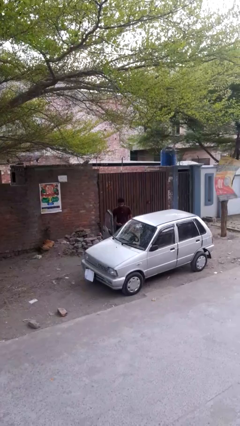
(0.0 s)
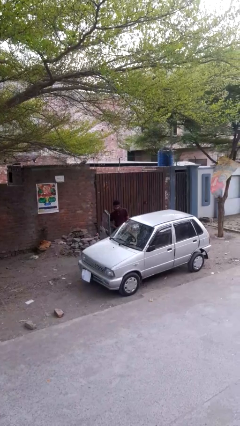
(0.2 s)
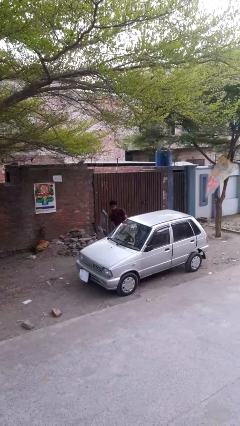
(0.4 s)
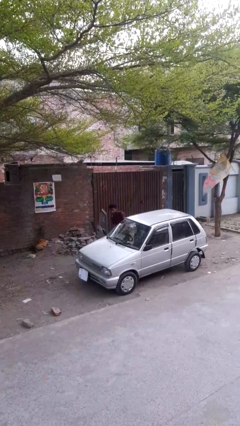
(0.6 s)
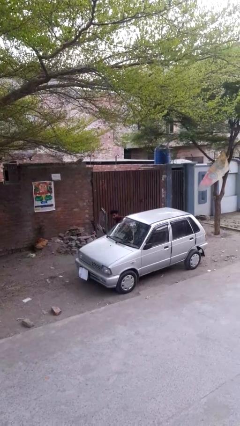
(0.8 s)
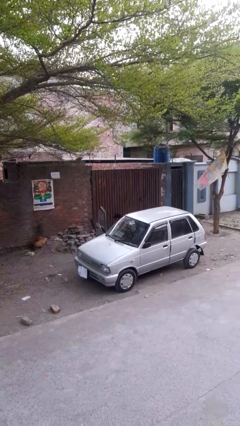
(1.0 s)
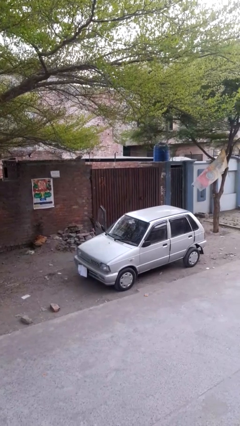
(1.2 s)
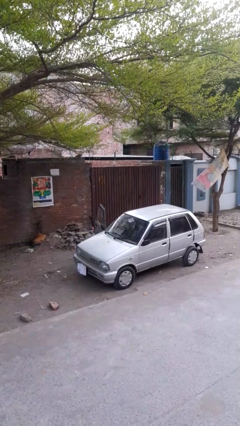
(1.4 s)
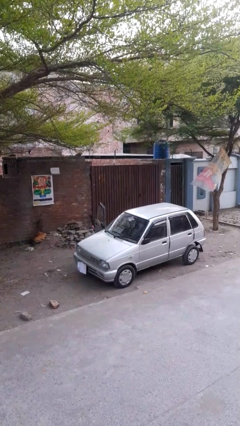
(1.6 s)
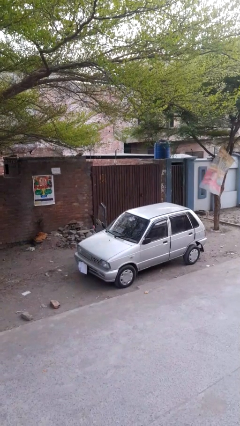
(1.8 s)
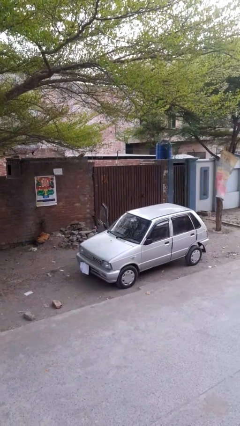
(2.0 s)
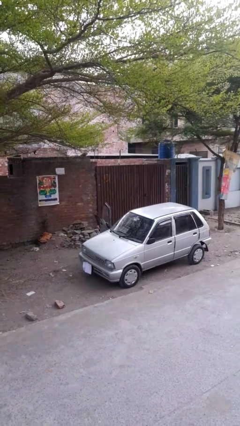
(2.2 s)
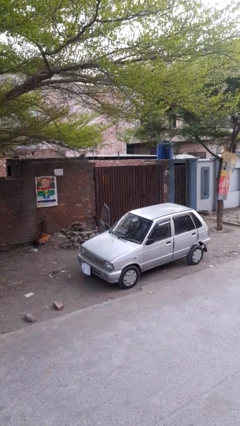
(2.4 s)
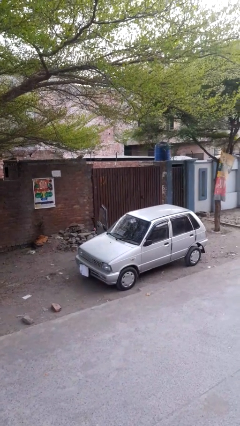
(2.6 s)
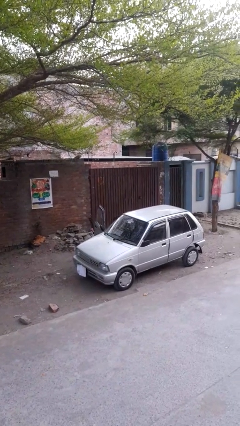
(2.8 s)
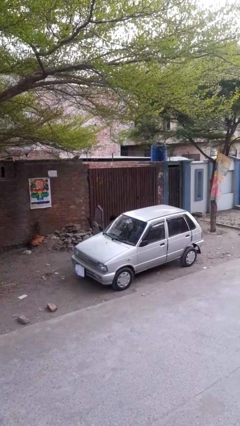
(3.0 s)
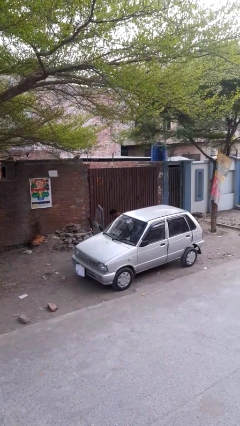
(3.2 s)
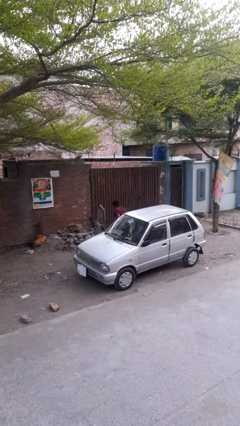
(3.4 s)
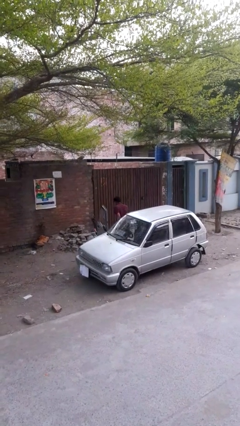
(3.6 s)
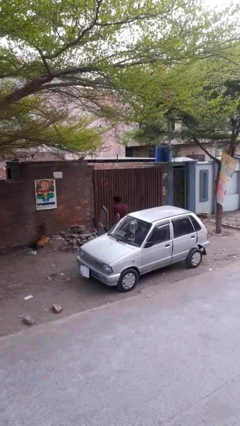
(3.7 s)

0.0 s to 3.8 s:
person enters car

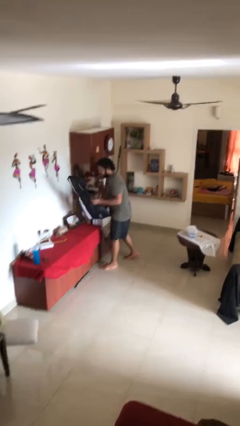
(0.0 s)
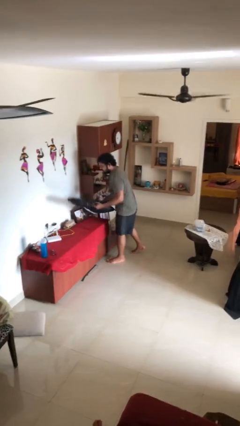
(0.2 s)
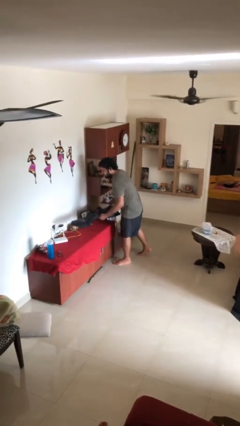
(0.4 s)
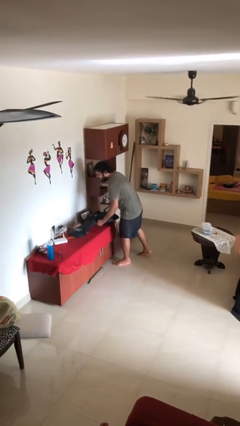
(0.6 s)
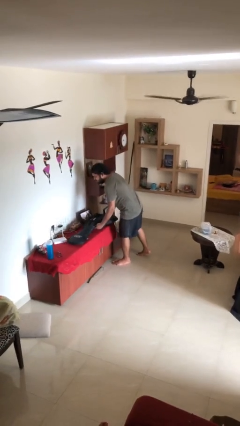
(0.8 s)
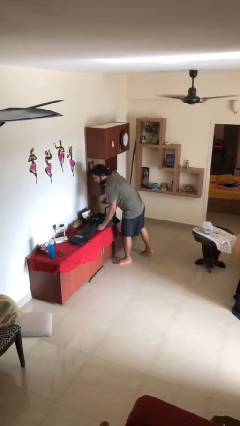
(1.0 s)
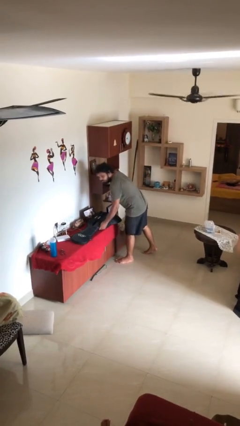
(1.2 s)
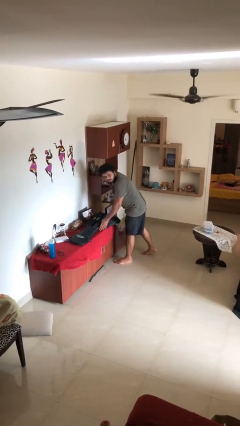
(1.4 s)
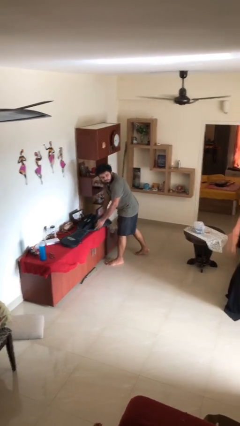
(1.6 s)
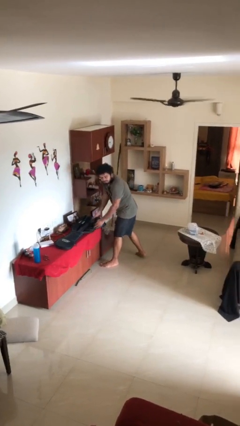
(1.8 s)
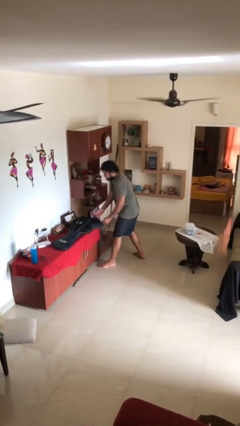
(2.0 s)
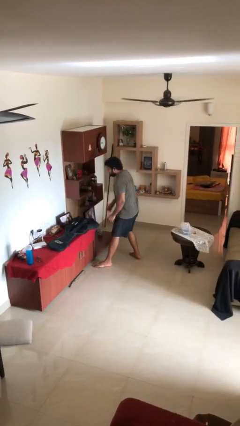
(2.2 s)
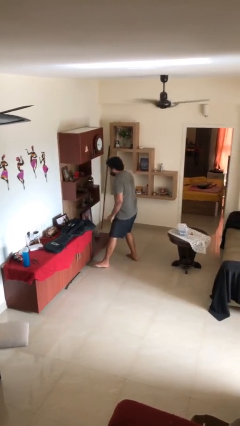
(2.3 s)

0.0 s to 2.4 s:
person puts down object on table

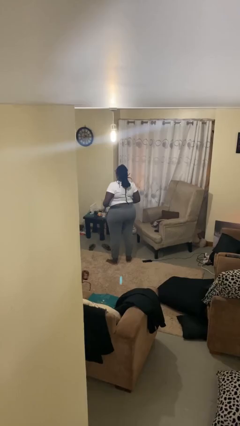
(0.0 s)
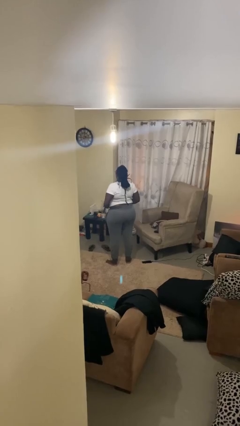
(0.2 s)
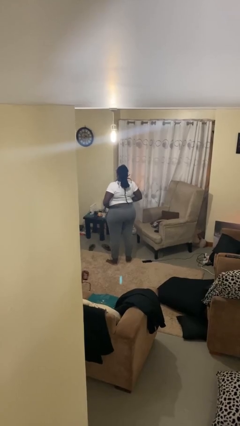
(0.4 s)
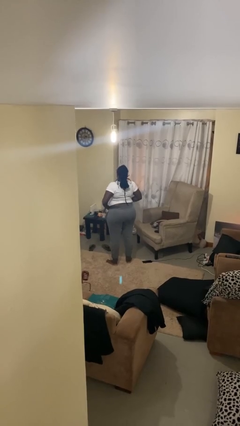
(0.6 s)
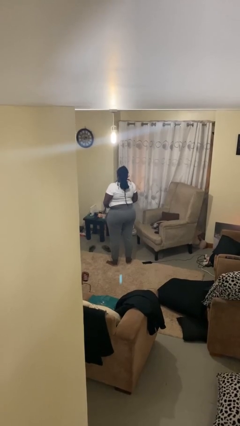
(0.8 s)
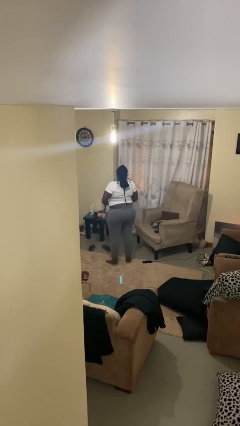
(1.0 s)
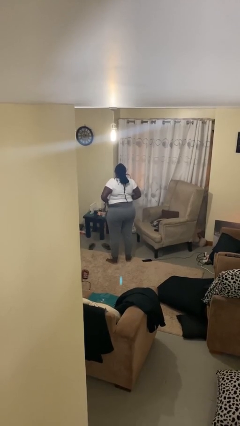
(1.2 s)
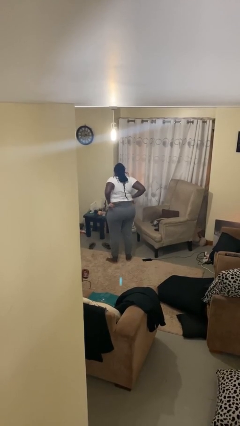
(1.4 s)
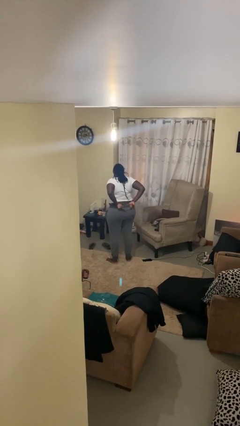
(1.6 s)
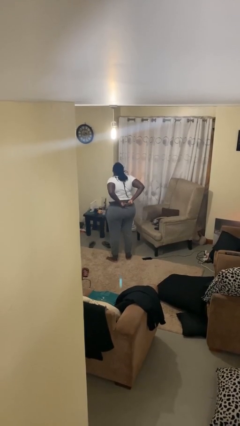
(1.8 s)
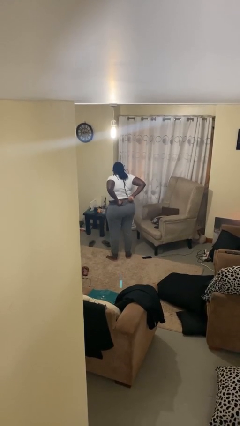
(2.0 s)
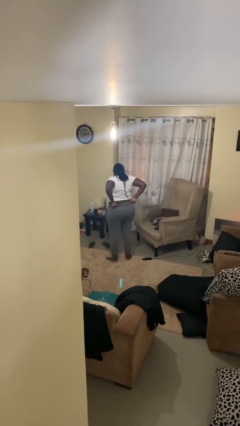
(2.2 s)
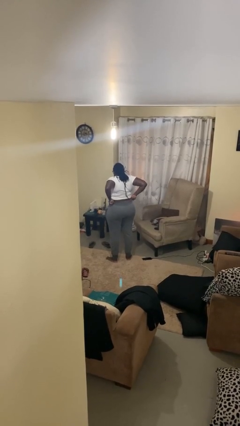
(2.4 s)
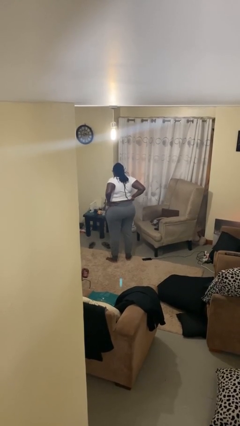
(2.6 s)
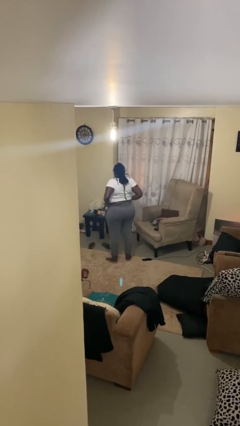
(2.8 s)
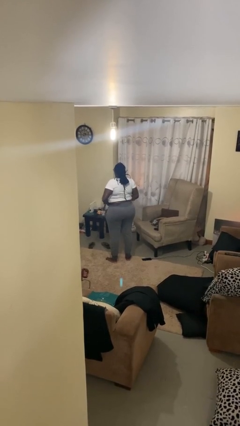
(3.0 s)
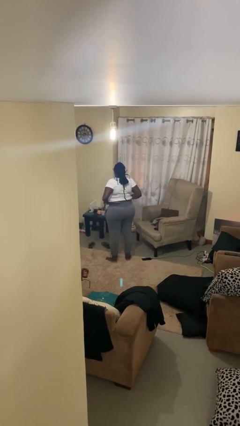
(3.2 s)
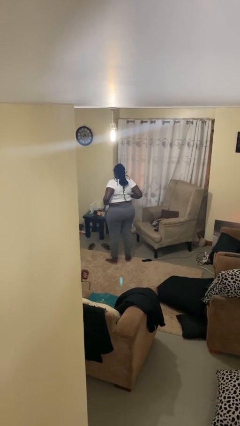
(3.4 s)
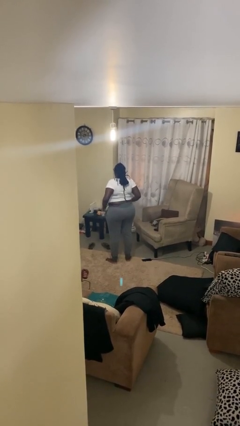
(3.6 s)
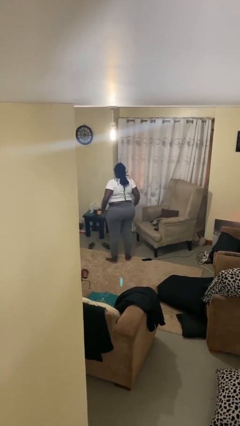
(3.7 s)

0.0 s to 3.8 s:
person hikes up pants

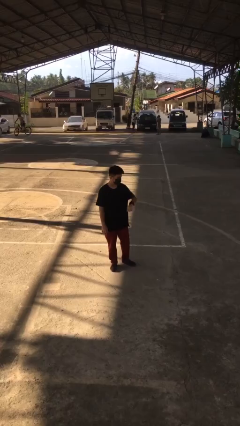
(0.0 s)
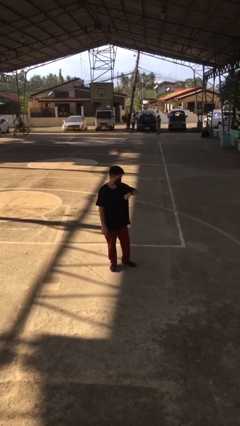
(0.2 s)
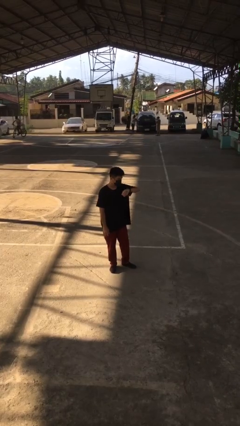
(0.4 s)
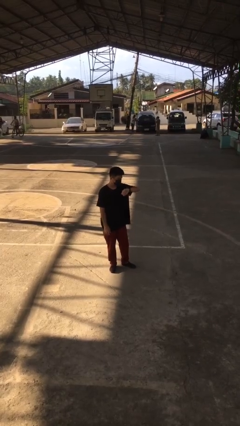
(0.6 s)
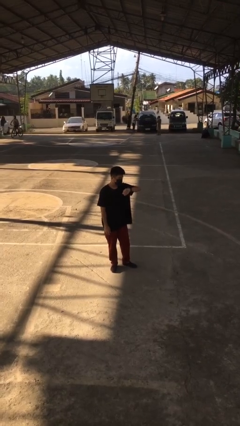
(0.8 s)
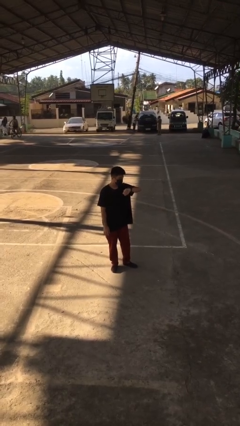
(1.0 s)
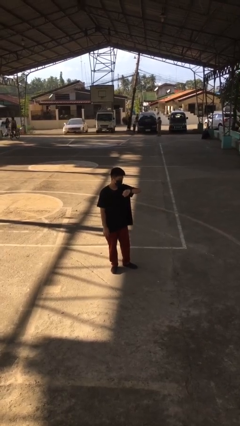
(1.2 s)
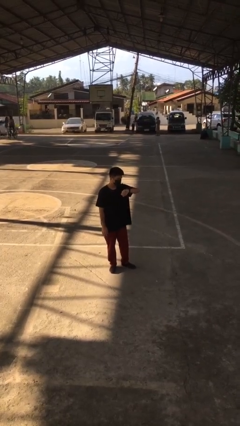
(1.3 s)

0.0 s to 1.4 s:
person looks at wristwatch

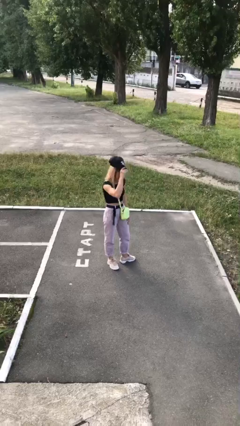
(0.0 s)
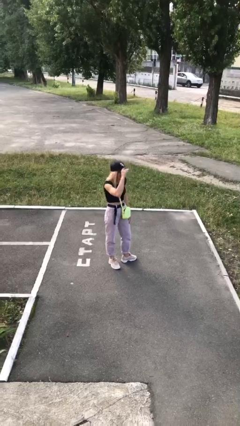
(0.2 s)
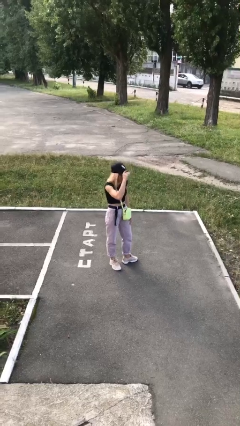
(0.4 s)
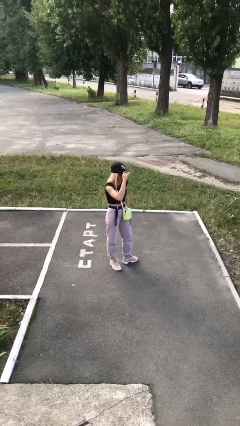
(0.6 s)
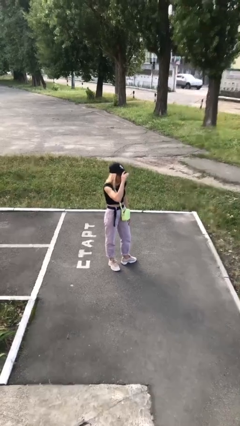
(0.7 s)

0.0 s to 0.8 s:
person puts on hat

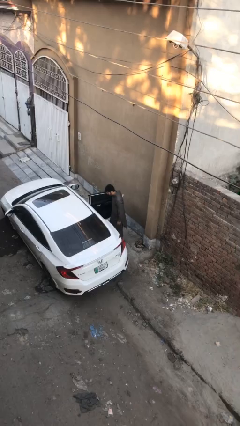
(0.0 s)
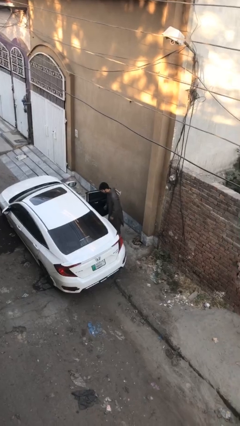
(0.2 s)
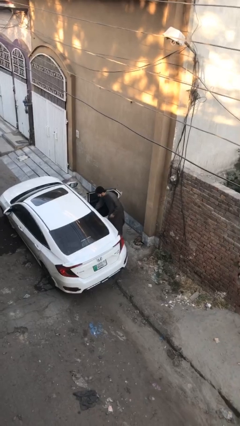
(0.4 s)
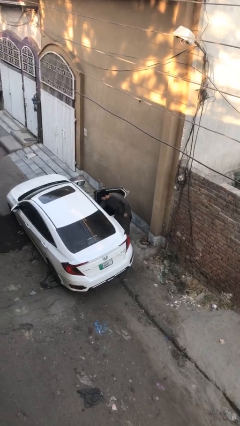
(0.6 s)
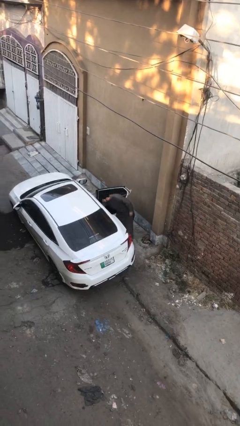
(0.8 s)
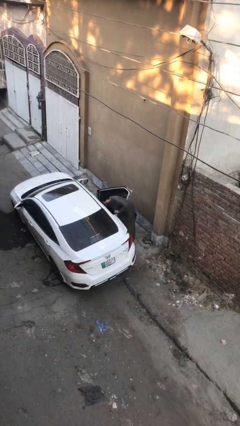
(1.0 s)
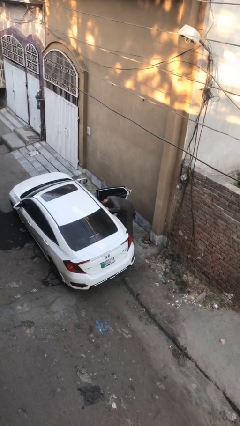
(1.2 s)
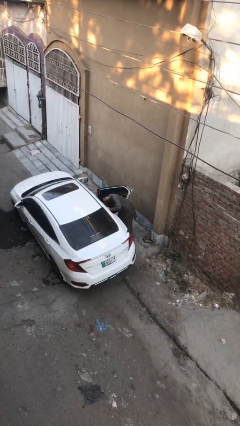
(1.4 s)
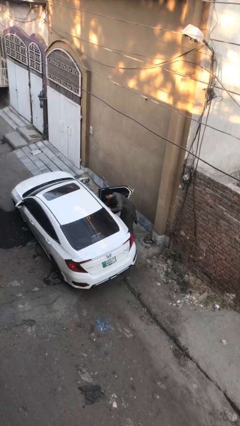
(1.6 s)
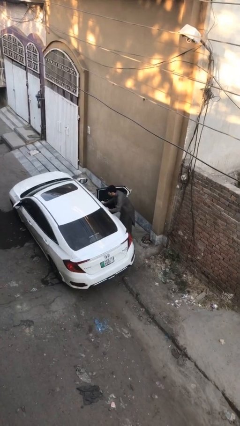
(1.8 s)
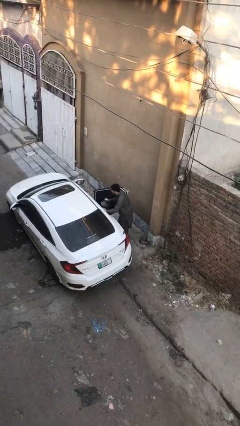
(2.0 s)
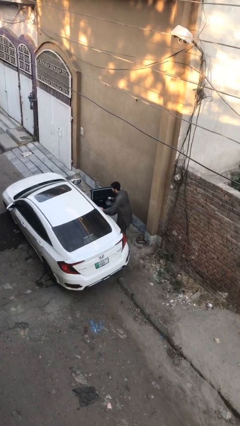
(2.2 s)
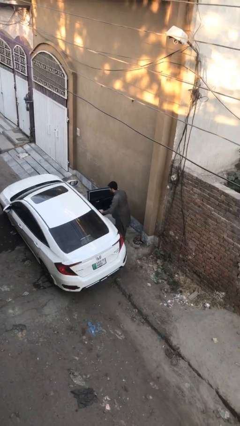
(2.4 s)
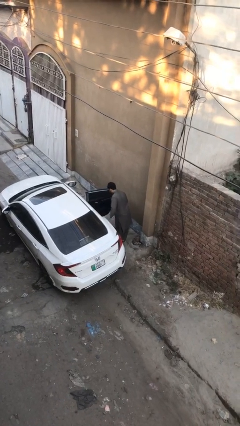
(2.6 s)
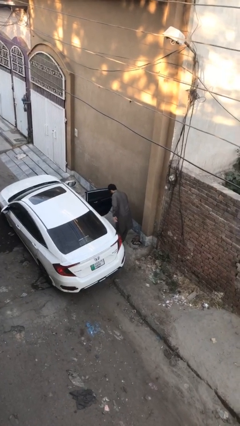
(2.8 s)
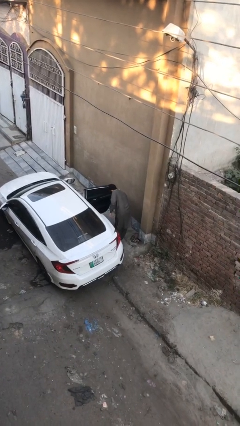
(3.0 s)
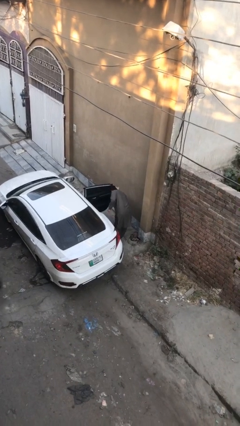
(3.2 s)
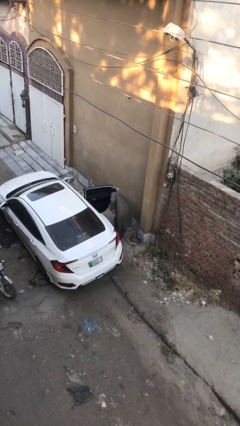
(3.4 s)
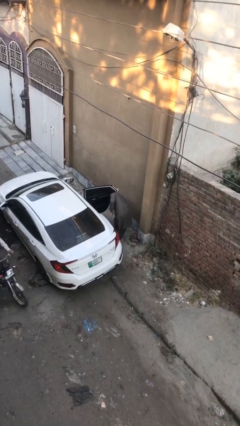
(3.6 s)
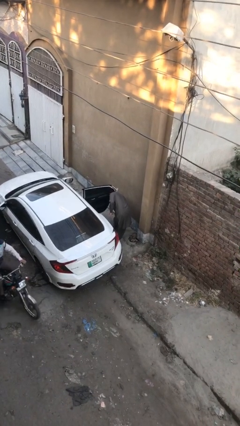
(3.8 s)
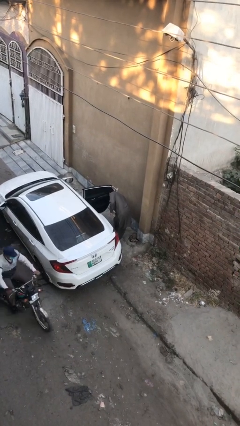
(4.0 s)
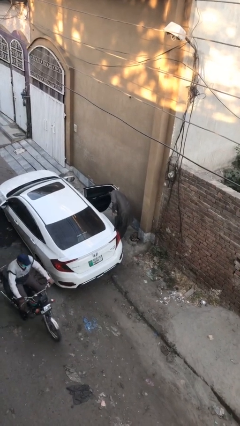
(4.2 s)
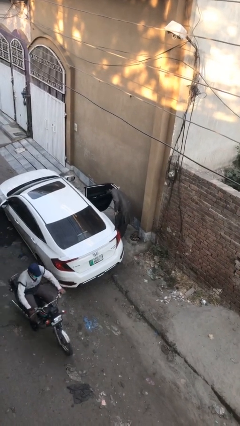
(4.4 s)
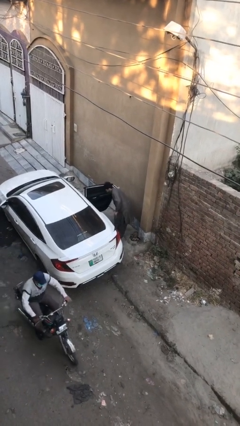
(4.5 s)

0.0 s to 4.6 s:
person unloads car

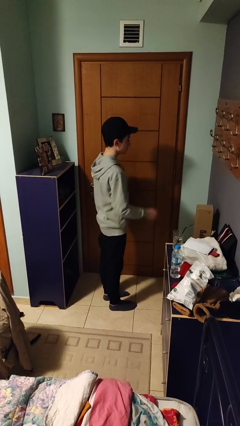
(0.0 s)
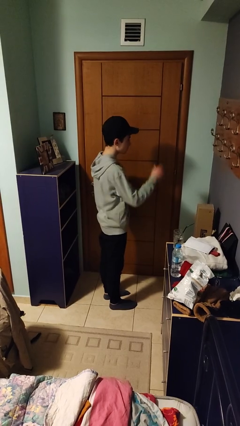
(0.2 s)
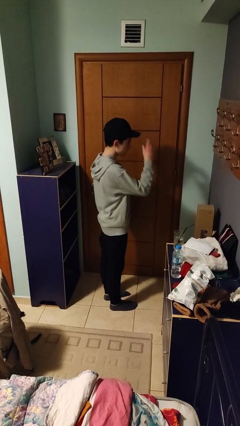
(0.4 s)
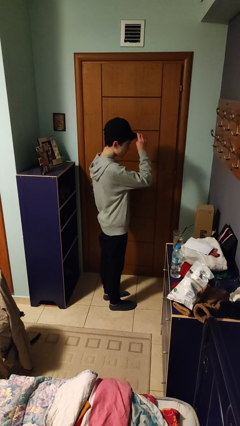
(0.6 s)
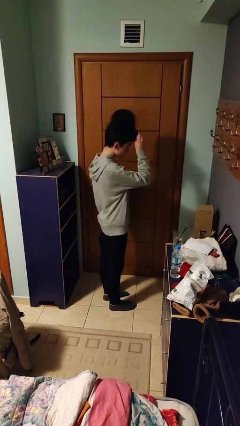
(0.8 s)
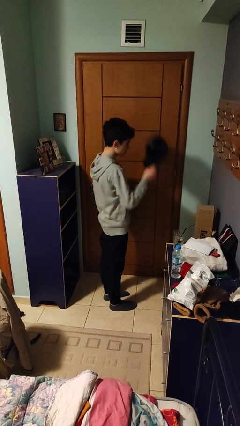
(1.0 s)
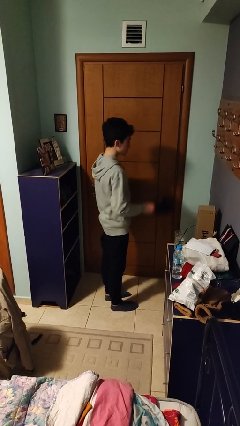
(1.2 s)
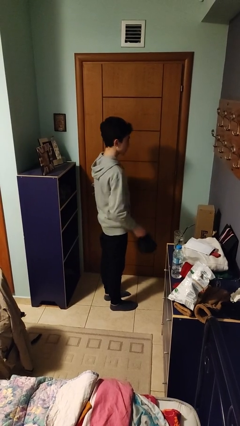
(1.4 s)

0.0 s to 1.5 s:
person takes off hat
